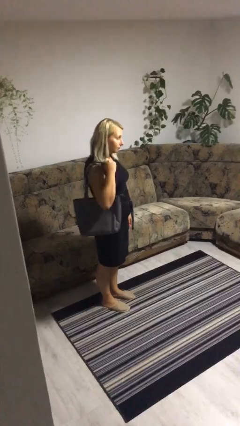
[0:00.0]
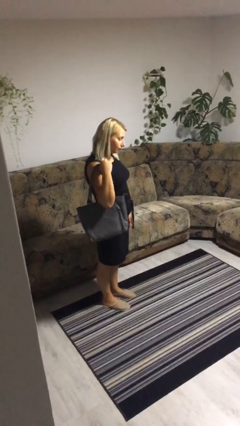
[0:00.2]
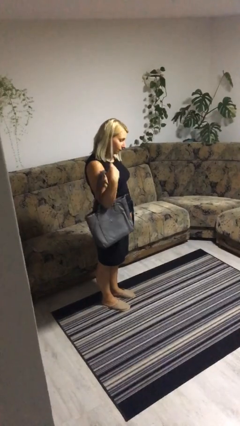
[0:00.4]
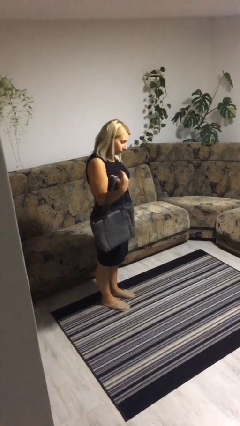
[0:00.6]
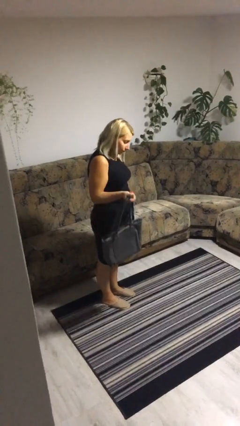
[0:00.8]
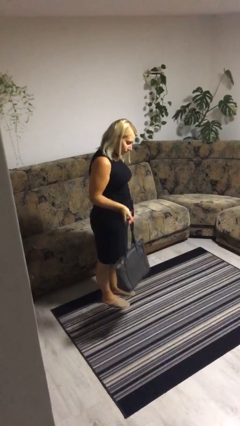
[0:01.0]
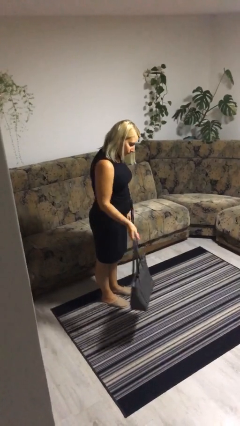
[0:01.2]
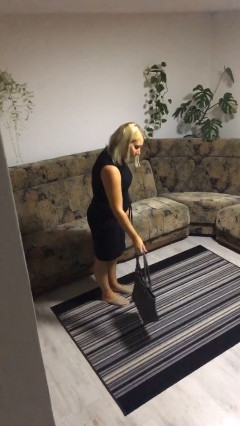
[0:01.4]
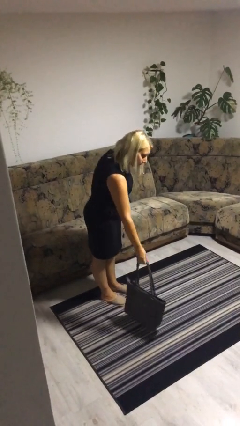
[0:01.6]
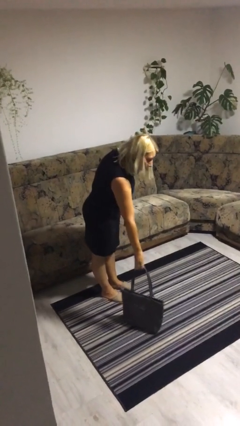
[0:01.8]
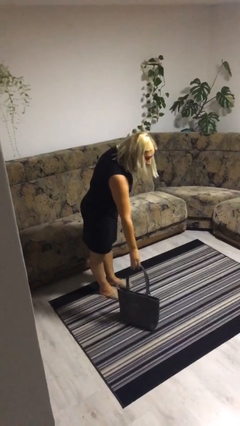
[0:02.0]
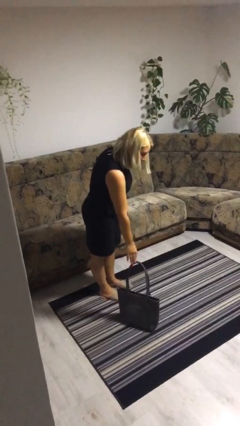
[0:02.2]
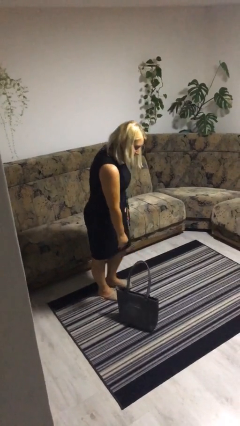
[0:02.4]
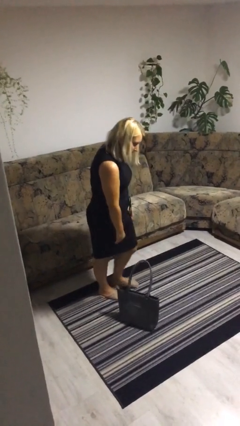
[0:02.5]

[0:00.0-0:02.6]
person puts down object on floor

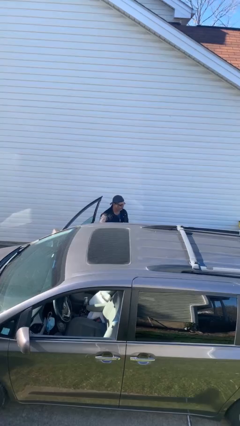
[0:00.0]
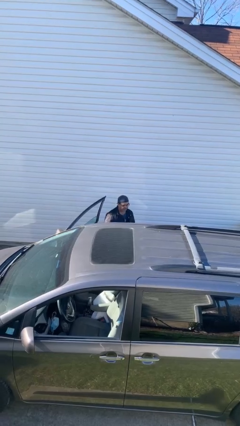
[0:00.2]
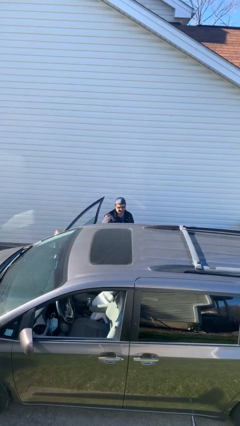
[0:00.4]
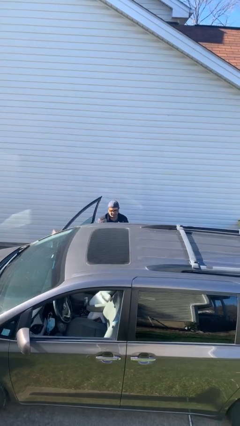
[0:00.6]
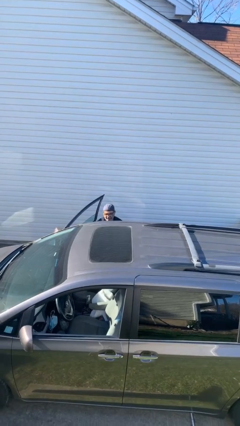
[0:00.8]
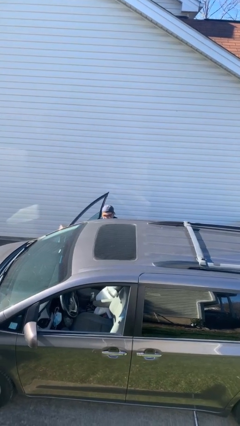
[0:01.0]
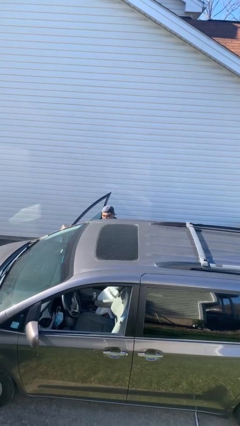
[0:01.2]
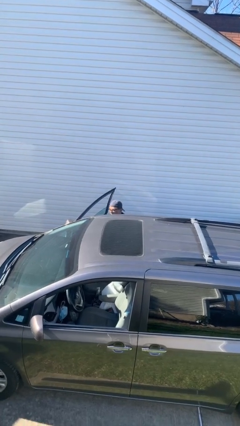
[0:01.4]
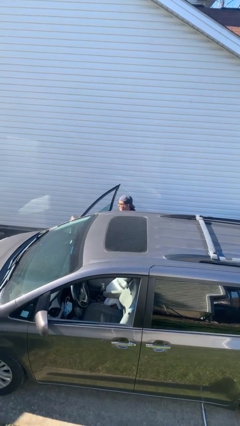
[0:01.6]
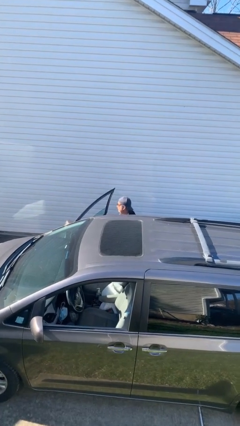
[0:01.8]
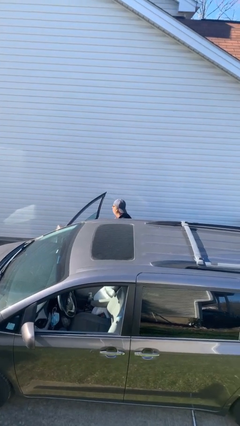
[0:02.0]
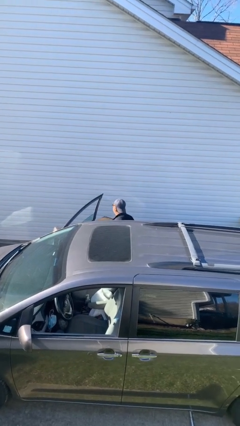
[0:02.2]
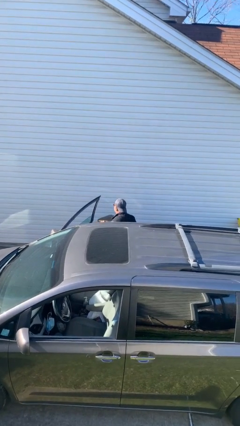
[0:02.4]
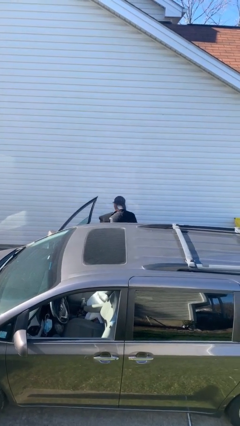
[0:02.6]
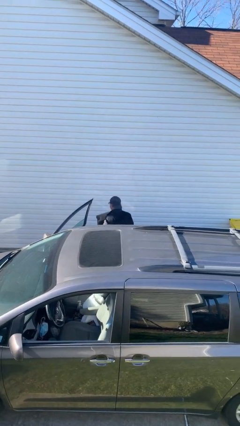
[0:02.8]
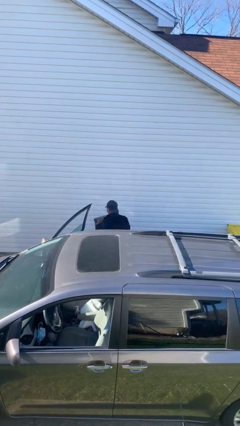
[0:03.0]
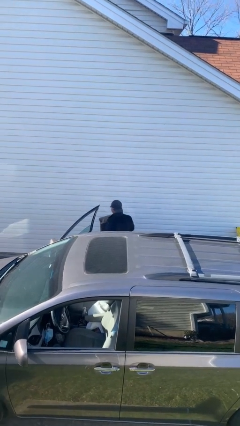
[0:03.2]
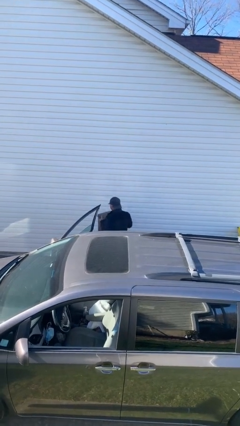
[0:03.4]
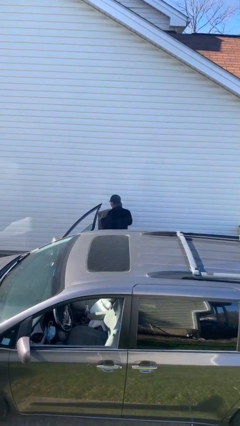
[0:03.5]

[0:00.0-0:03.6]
person unloads car

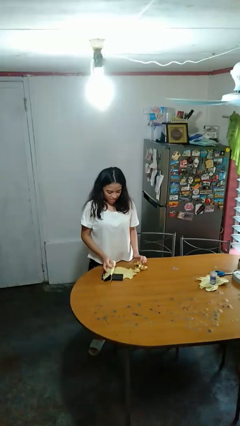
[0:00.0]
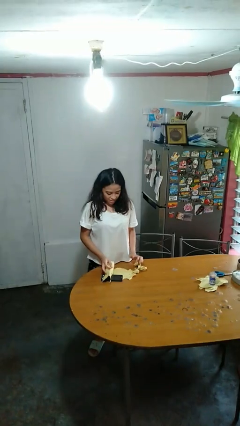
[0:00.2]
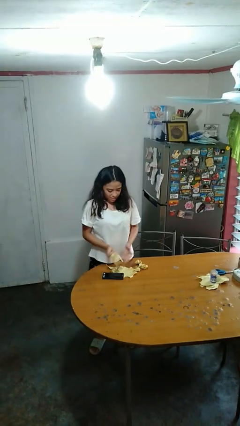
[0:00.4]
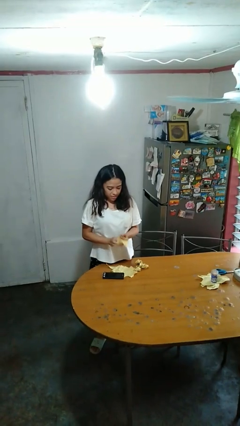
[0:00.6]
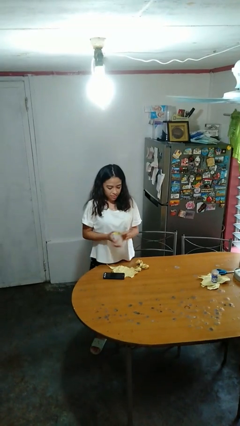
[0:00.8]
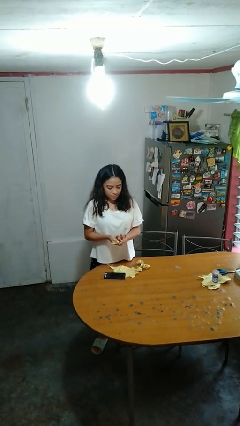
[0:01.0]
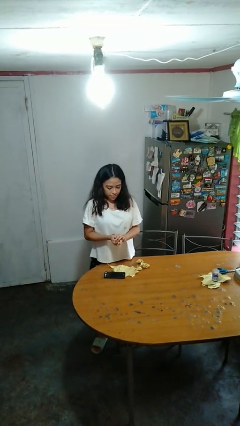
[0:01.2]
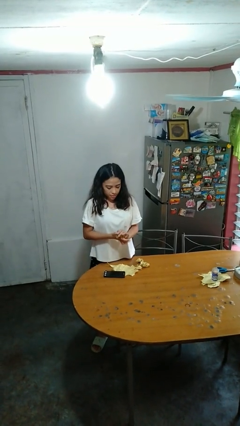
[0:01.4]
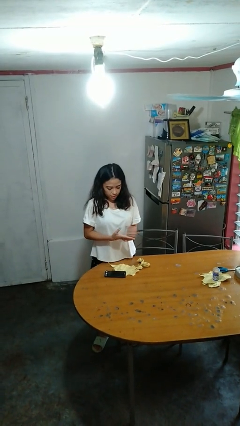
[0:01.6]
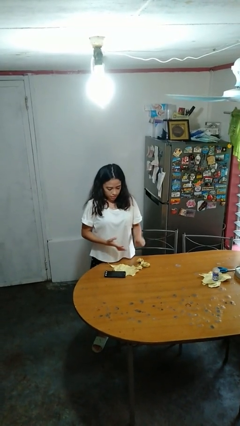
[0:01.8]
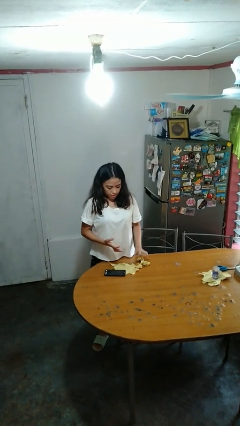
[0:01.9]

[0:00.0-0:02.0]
person crumples paper

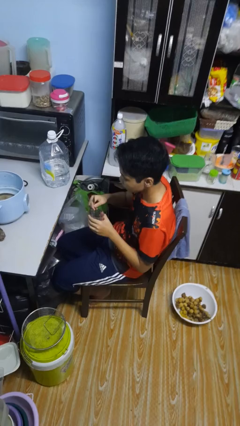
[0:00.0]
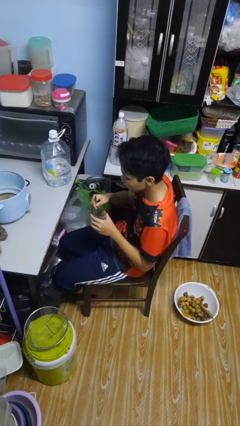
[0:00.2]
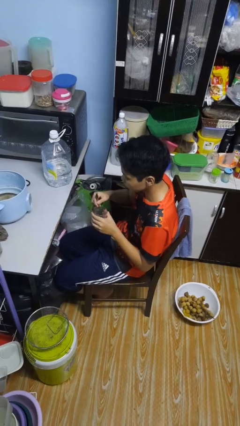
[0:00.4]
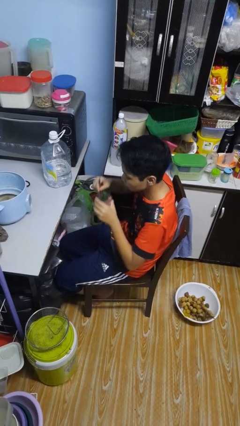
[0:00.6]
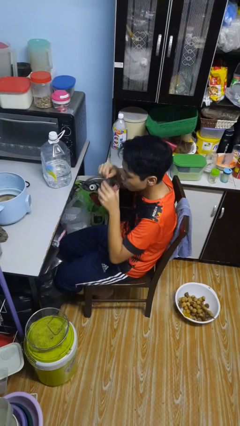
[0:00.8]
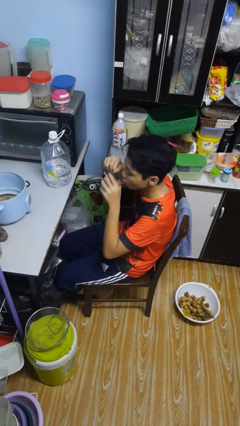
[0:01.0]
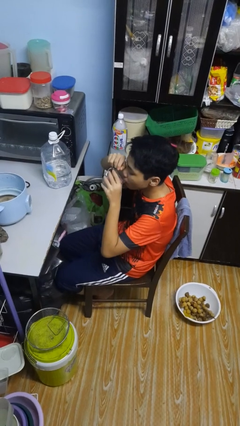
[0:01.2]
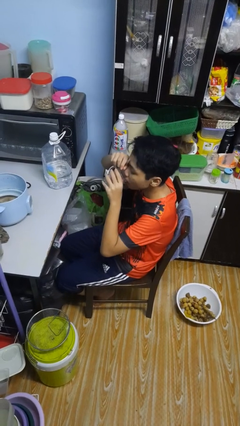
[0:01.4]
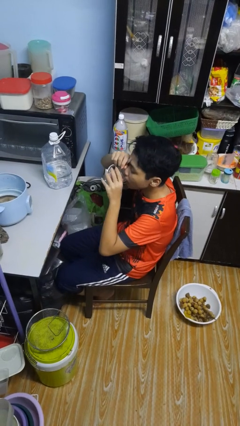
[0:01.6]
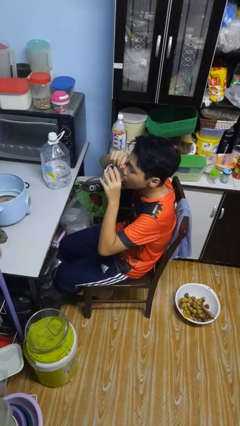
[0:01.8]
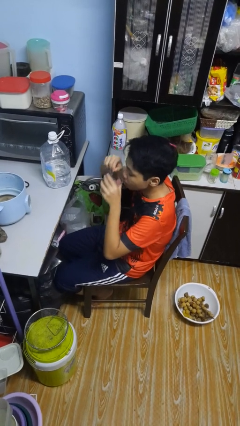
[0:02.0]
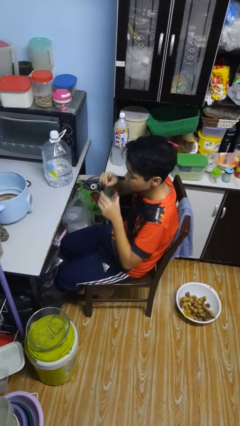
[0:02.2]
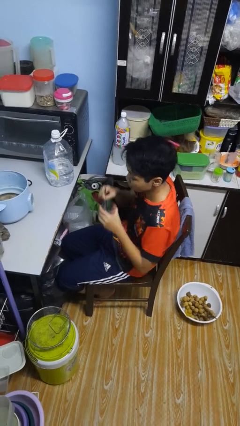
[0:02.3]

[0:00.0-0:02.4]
person drinks from mug

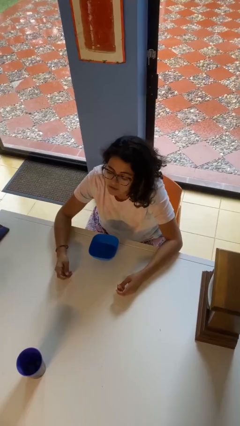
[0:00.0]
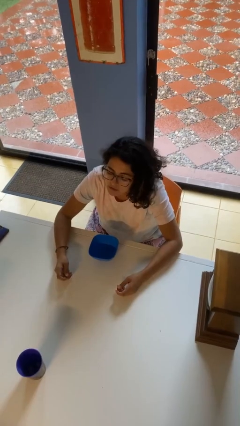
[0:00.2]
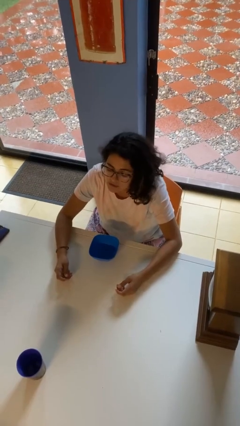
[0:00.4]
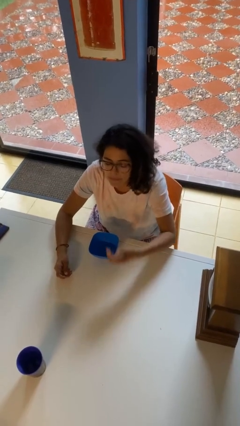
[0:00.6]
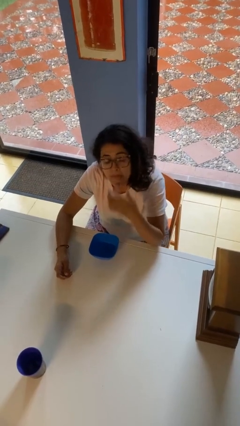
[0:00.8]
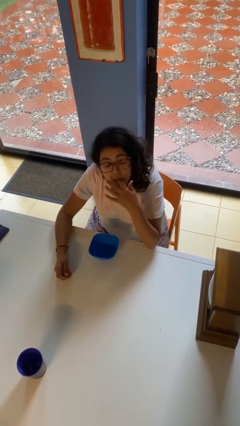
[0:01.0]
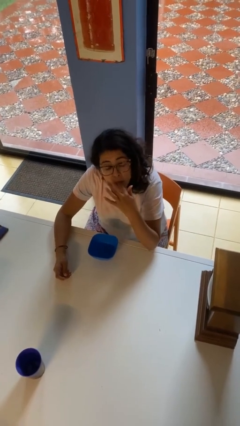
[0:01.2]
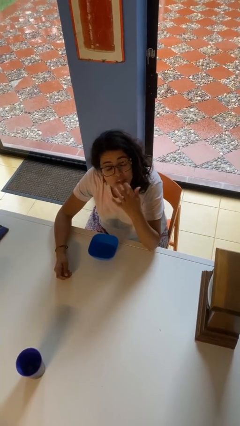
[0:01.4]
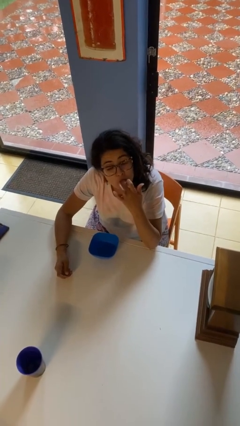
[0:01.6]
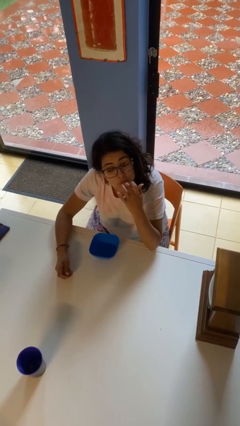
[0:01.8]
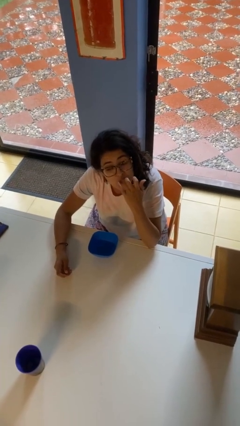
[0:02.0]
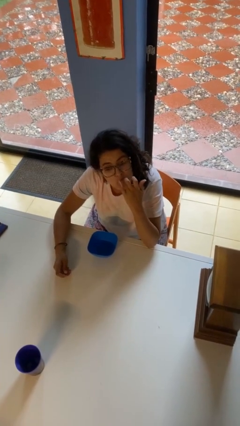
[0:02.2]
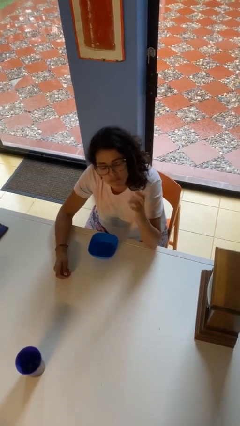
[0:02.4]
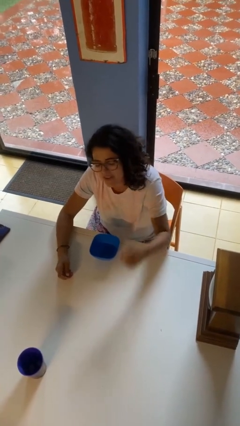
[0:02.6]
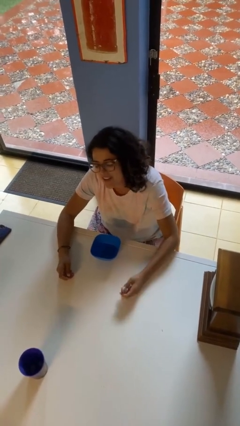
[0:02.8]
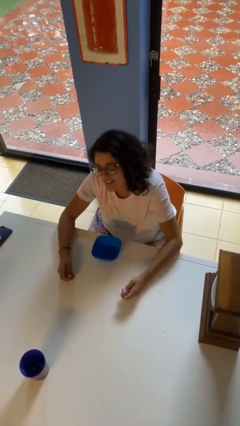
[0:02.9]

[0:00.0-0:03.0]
person licks fingers

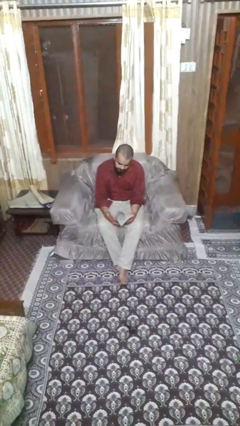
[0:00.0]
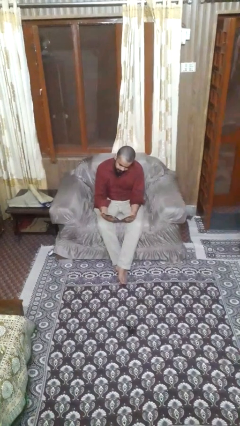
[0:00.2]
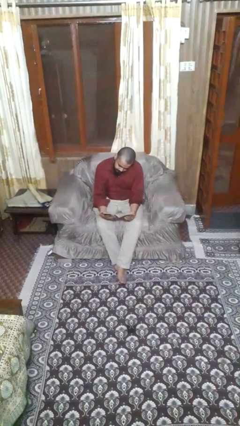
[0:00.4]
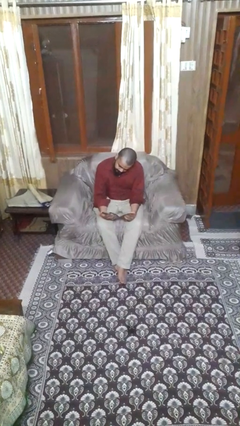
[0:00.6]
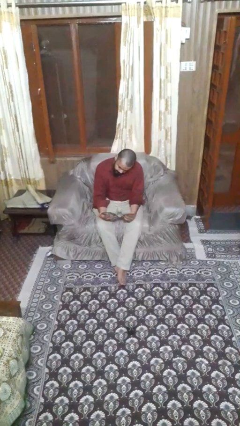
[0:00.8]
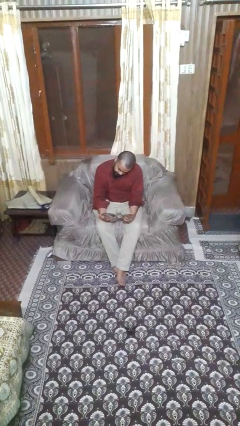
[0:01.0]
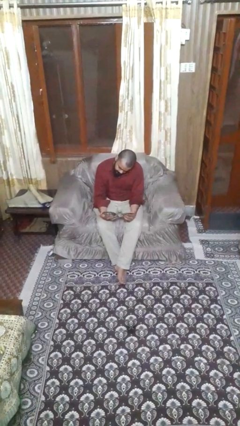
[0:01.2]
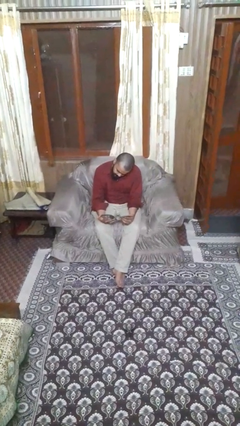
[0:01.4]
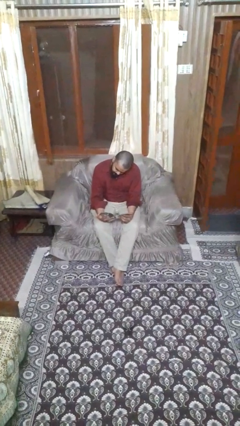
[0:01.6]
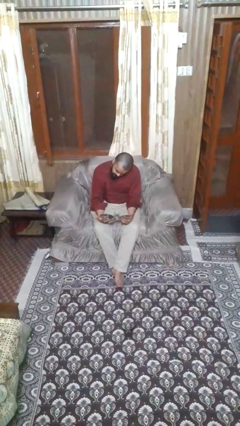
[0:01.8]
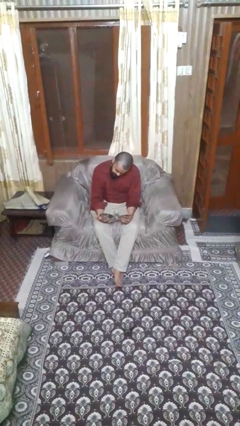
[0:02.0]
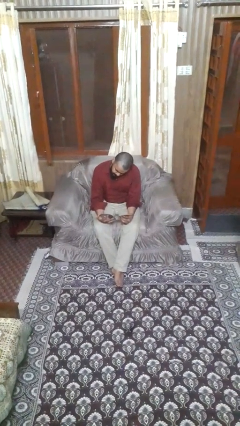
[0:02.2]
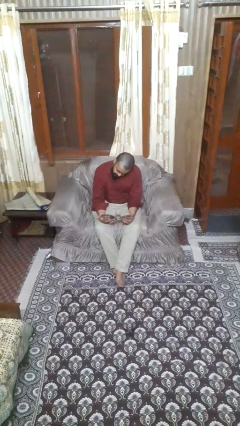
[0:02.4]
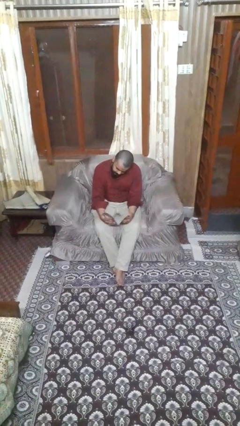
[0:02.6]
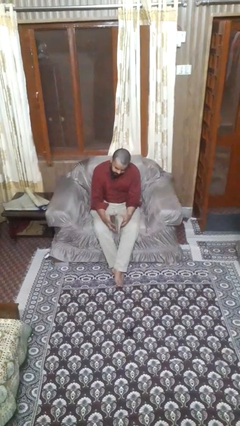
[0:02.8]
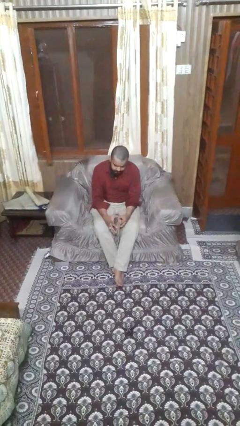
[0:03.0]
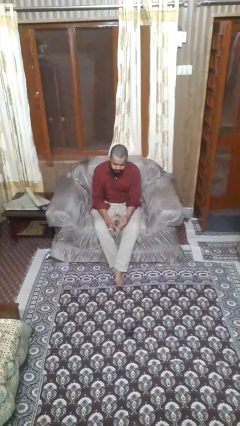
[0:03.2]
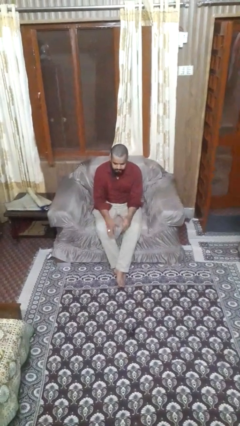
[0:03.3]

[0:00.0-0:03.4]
person reads magazine
